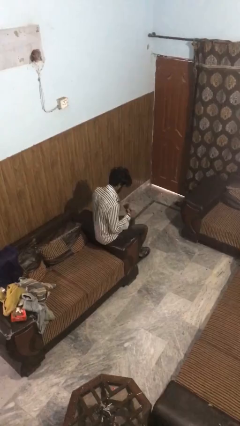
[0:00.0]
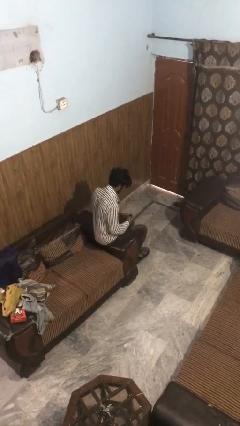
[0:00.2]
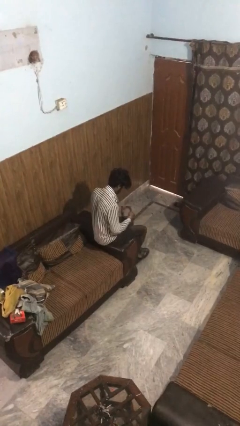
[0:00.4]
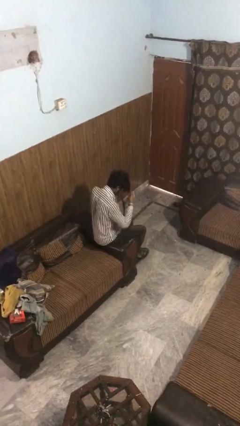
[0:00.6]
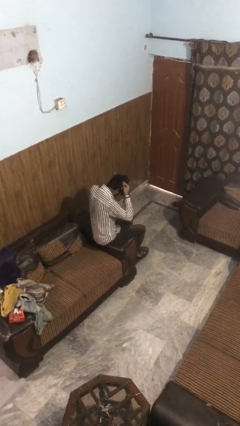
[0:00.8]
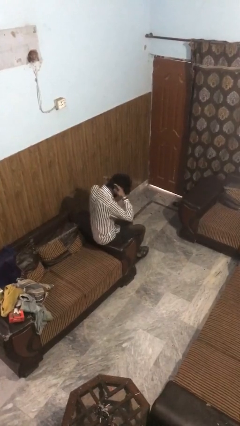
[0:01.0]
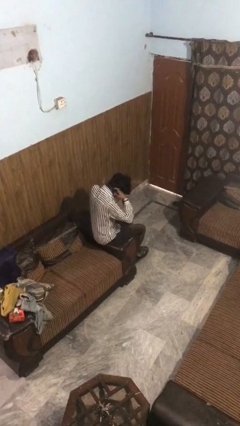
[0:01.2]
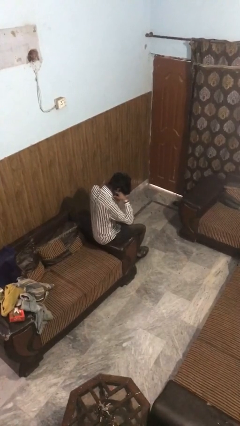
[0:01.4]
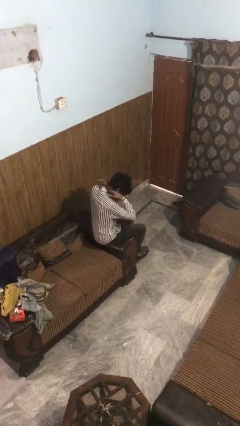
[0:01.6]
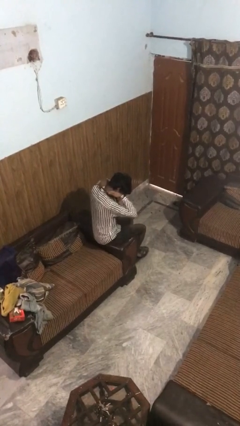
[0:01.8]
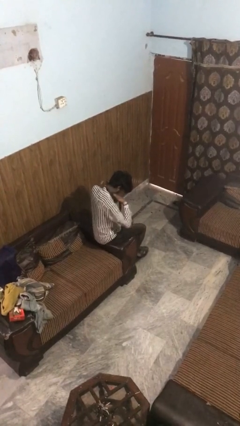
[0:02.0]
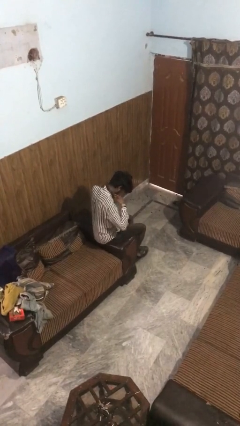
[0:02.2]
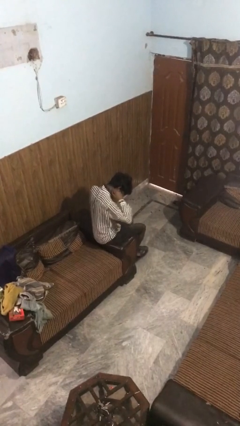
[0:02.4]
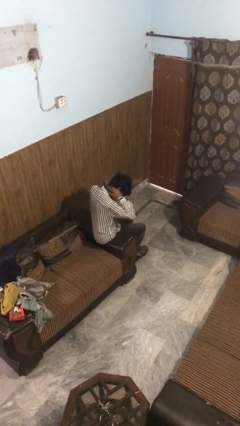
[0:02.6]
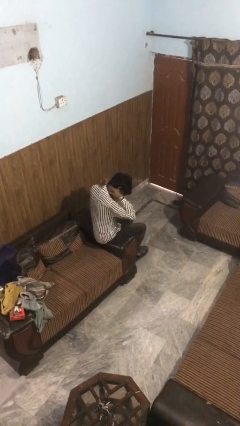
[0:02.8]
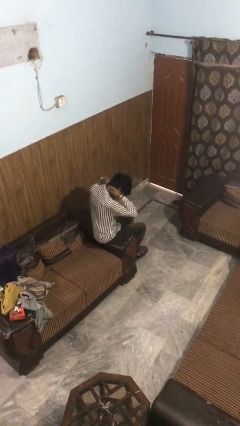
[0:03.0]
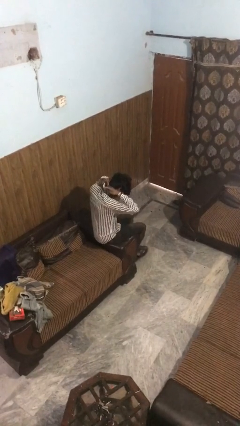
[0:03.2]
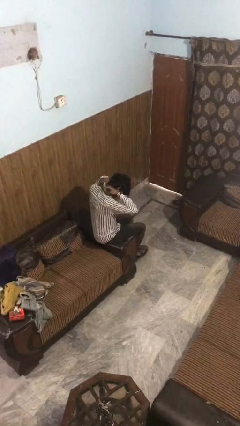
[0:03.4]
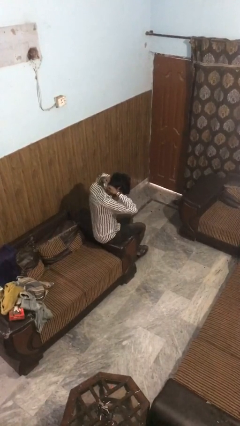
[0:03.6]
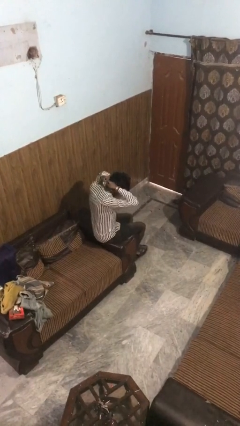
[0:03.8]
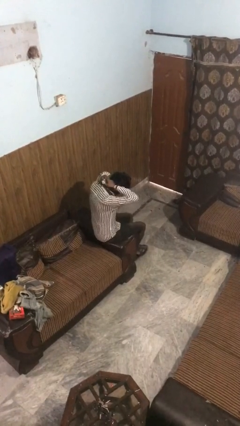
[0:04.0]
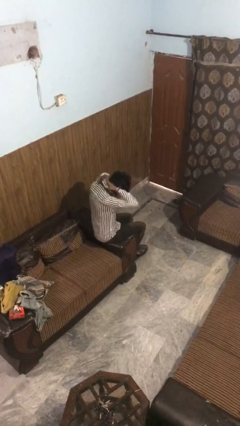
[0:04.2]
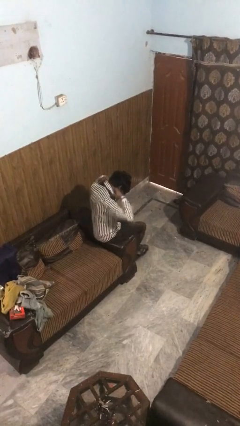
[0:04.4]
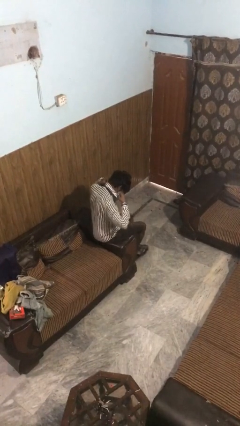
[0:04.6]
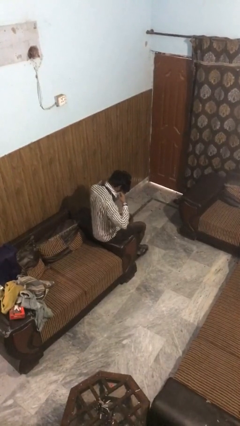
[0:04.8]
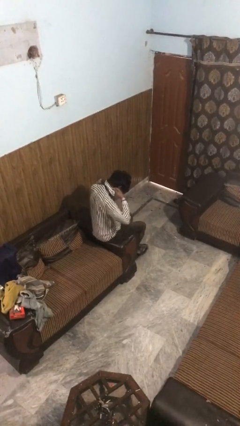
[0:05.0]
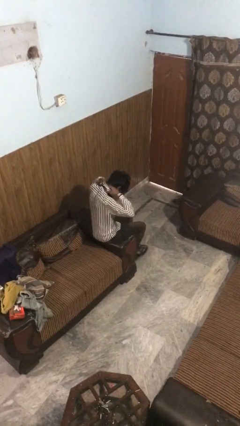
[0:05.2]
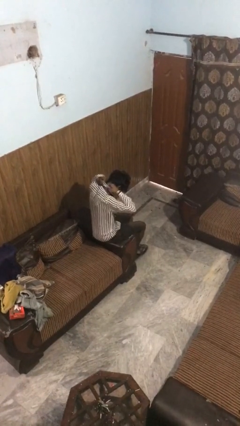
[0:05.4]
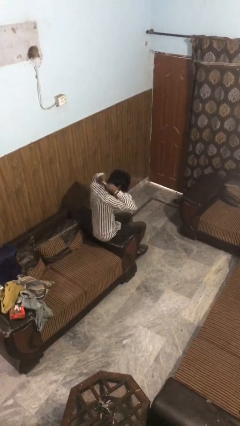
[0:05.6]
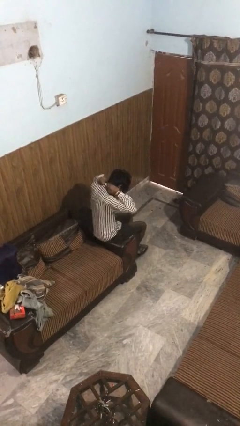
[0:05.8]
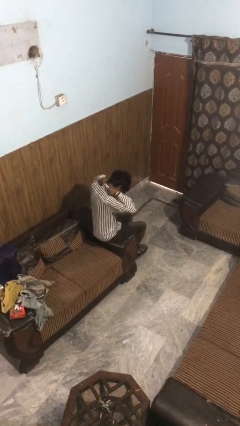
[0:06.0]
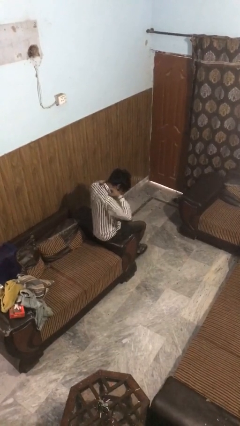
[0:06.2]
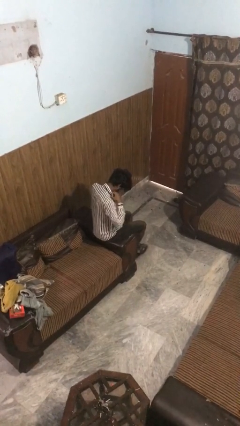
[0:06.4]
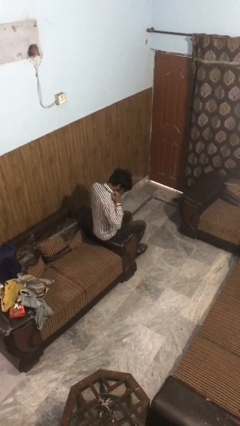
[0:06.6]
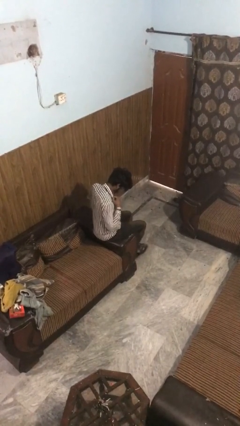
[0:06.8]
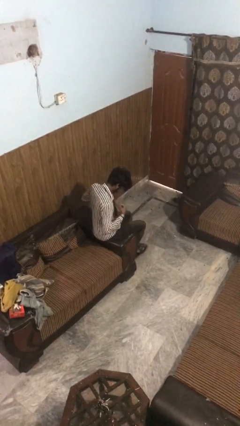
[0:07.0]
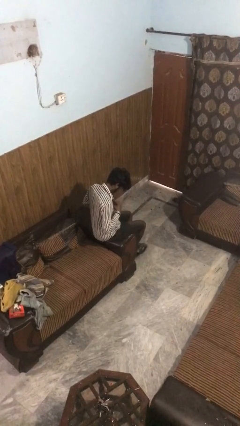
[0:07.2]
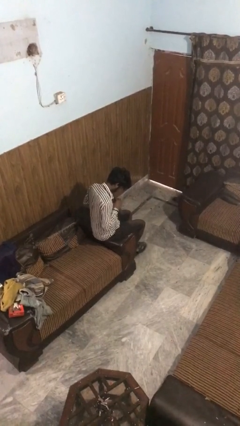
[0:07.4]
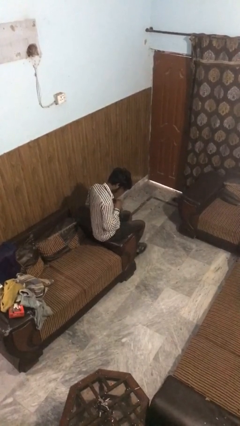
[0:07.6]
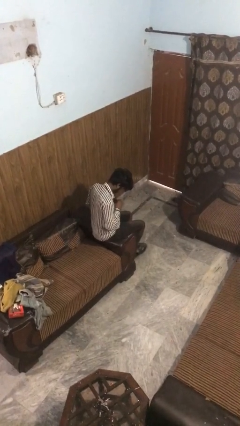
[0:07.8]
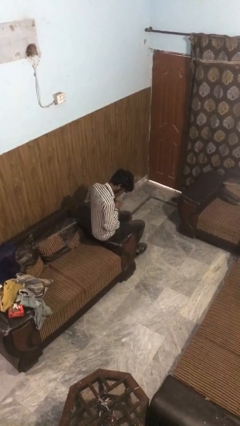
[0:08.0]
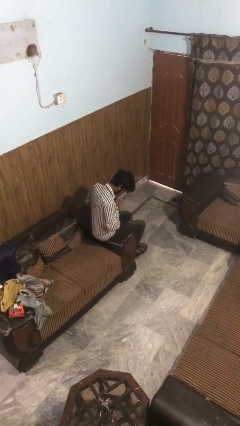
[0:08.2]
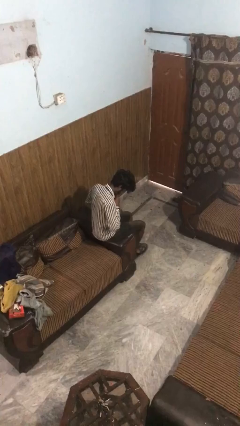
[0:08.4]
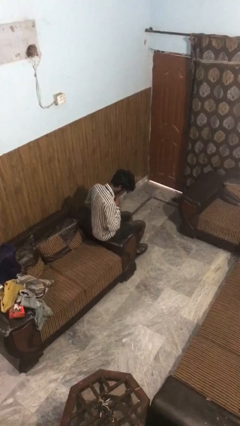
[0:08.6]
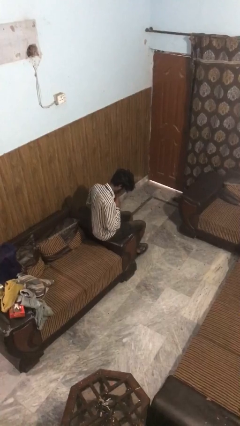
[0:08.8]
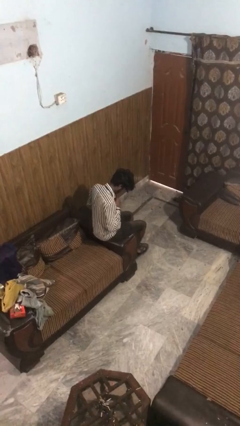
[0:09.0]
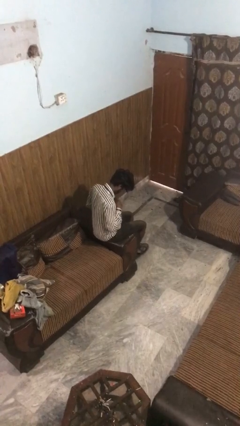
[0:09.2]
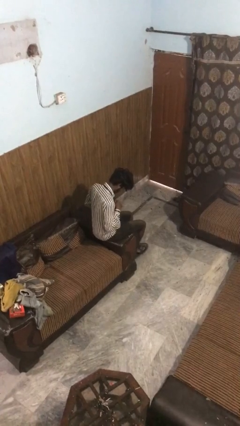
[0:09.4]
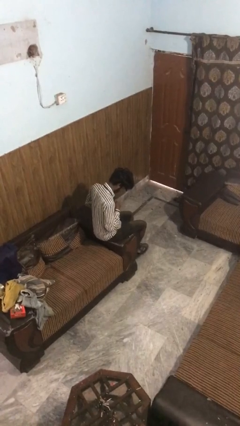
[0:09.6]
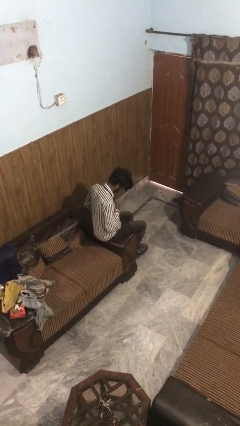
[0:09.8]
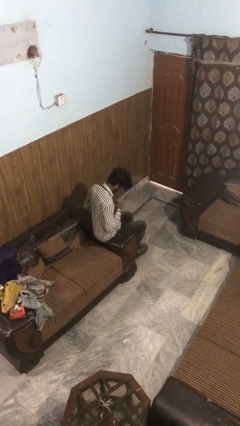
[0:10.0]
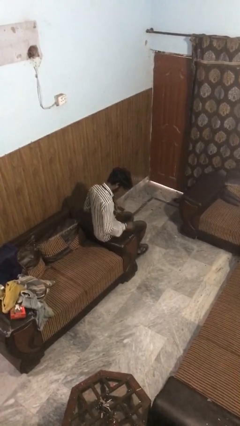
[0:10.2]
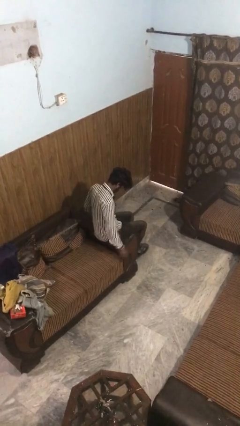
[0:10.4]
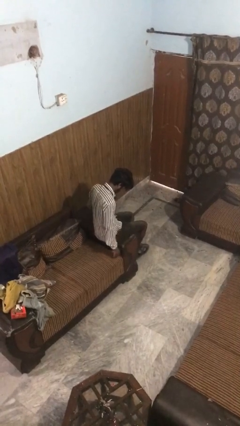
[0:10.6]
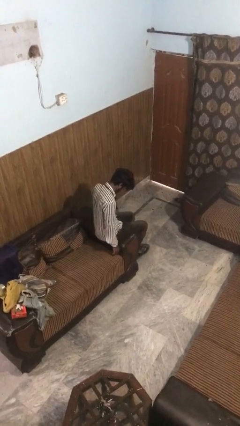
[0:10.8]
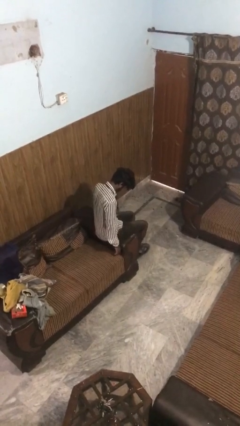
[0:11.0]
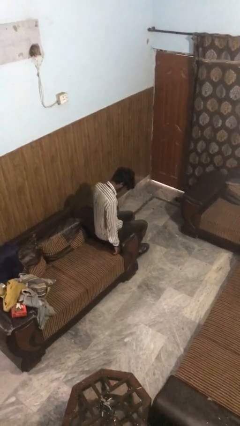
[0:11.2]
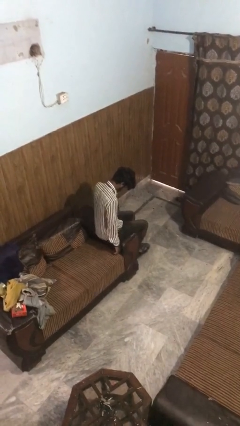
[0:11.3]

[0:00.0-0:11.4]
person puts on necktie

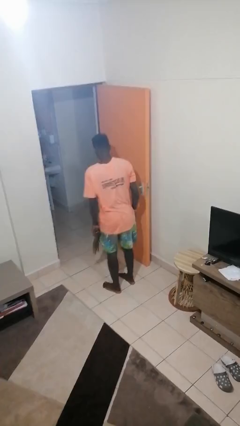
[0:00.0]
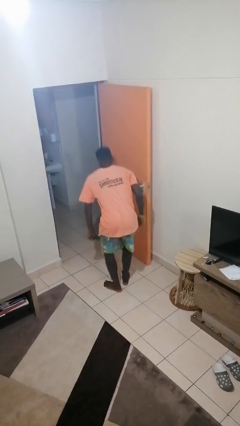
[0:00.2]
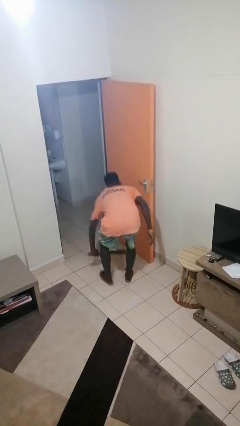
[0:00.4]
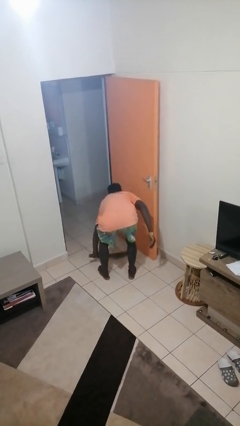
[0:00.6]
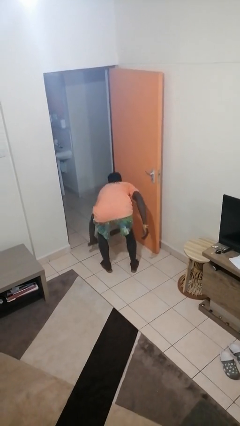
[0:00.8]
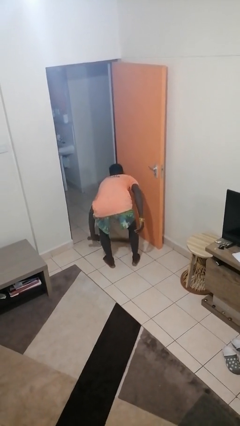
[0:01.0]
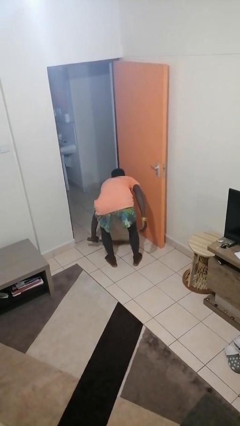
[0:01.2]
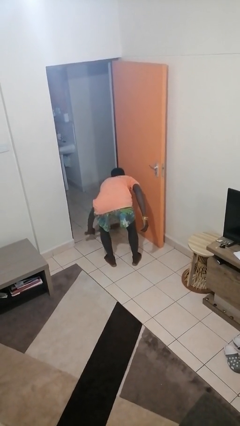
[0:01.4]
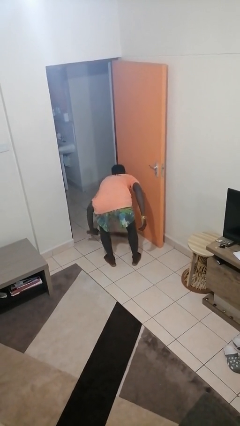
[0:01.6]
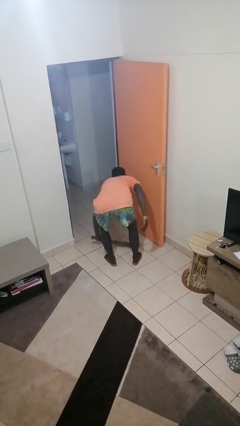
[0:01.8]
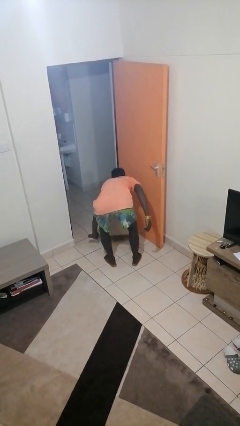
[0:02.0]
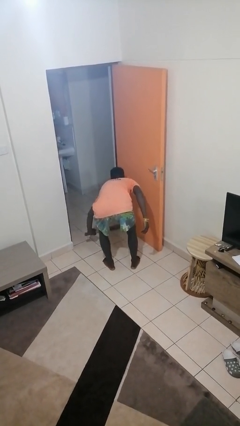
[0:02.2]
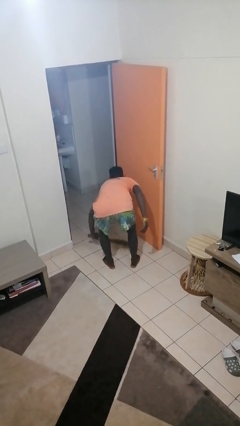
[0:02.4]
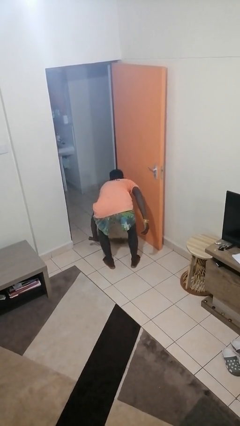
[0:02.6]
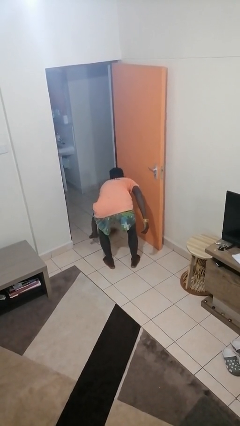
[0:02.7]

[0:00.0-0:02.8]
person sweeps floor

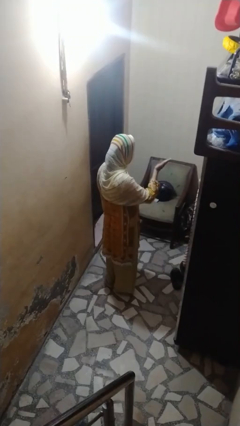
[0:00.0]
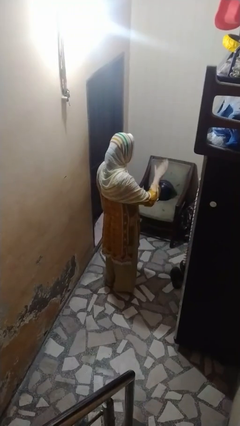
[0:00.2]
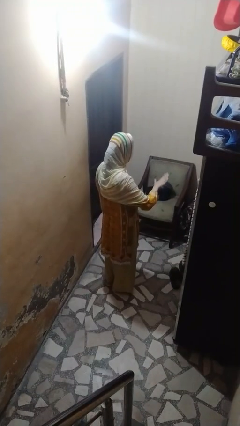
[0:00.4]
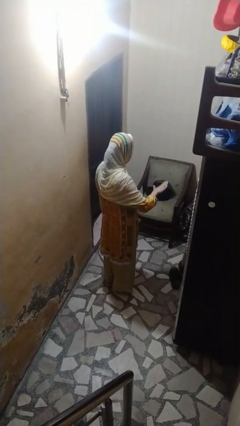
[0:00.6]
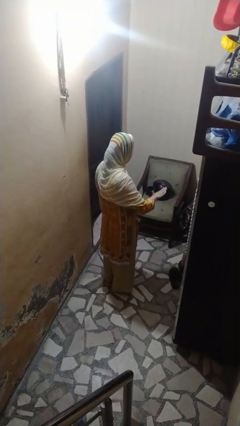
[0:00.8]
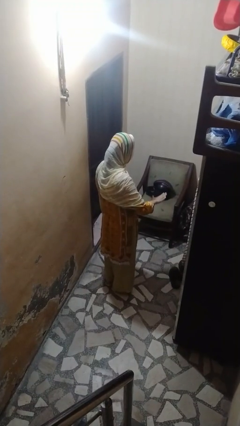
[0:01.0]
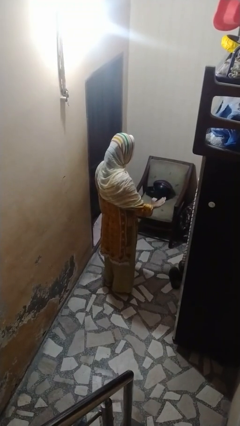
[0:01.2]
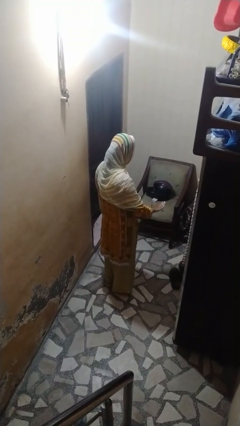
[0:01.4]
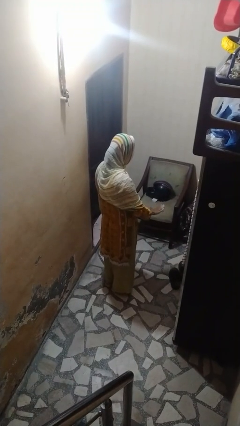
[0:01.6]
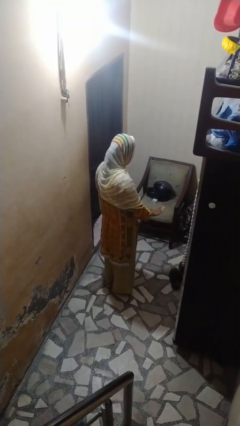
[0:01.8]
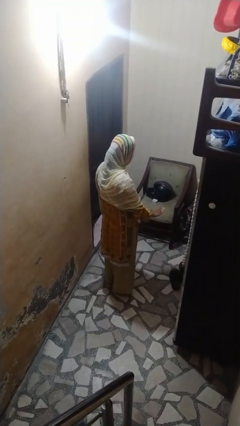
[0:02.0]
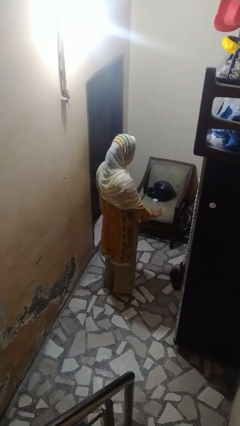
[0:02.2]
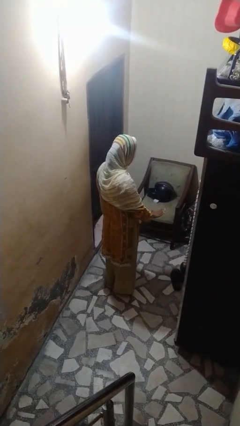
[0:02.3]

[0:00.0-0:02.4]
person gestures swipe down

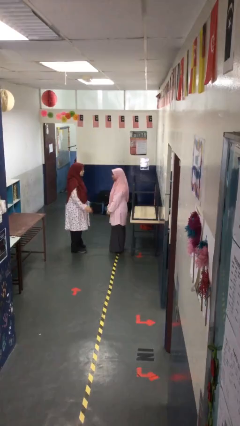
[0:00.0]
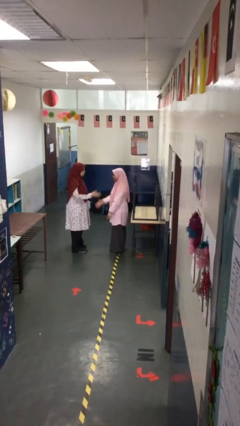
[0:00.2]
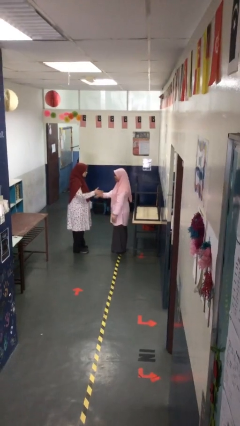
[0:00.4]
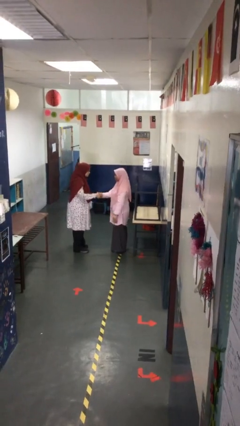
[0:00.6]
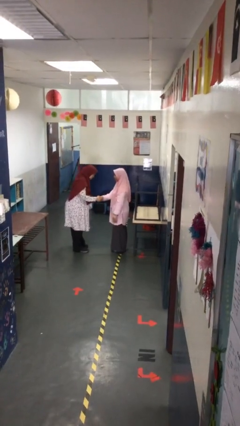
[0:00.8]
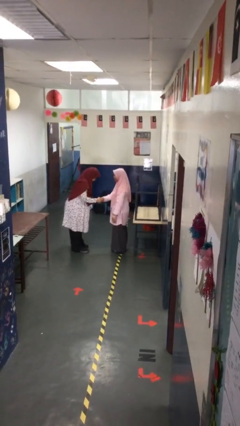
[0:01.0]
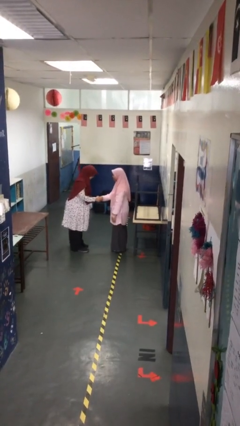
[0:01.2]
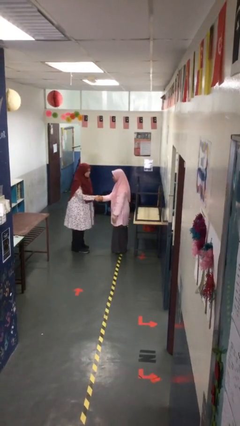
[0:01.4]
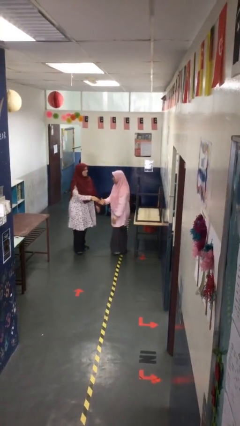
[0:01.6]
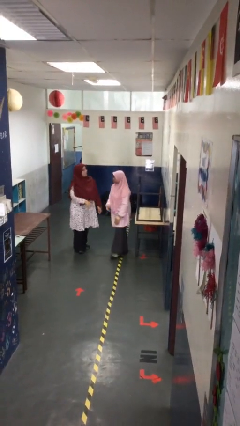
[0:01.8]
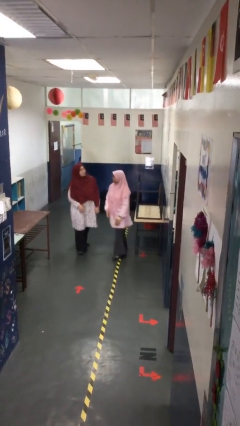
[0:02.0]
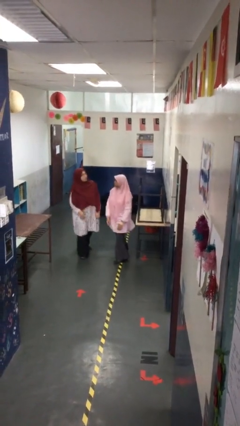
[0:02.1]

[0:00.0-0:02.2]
person shakes hand
